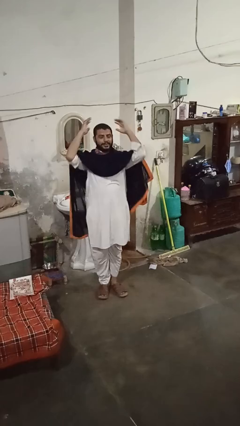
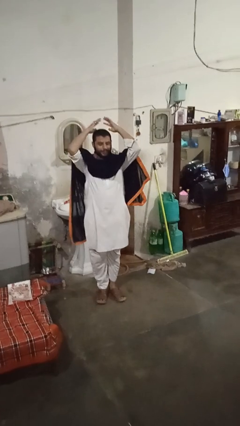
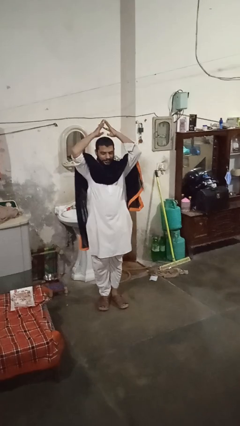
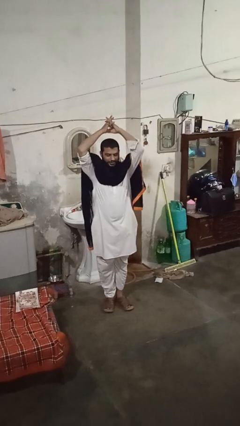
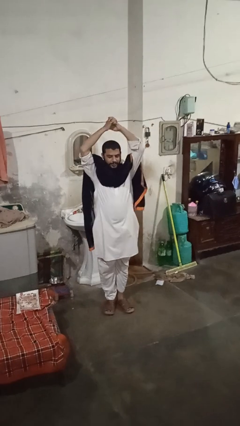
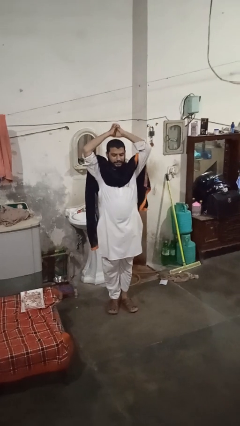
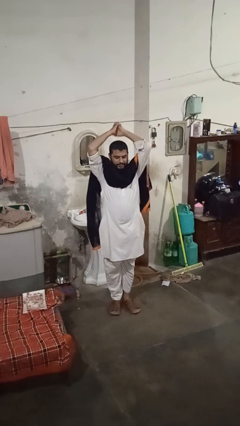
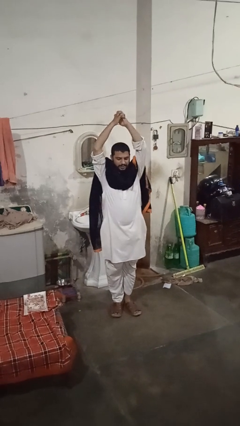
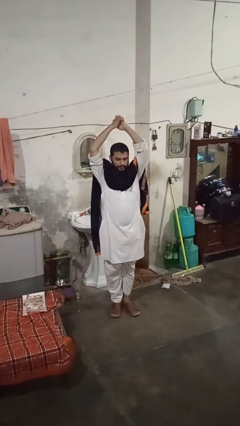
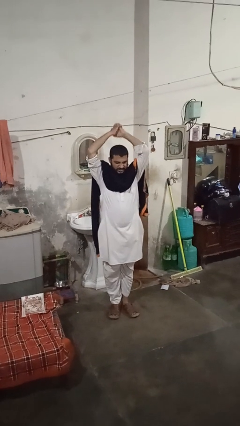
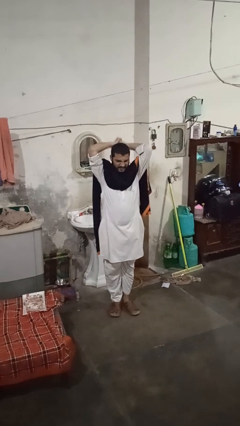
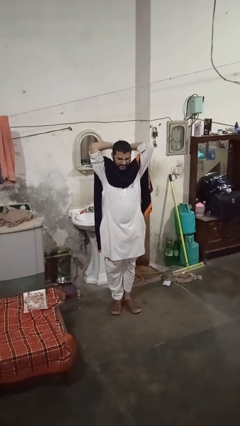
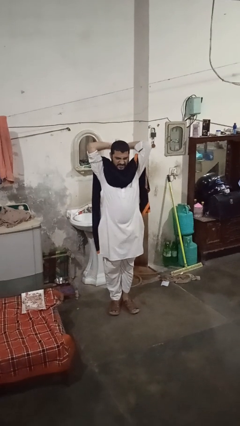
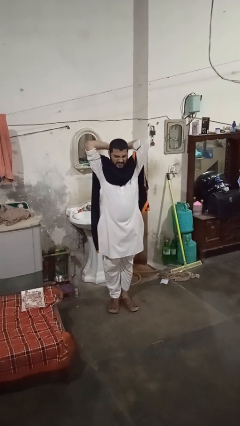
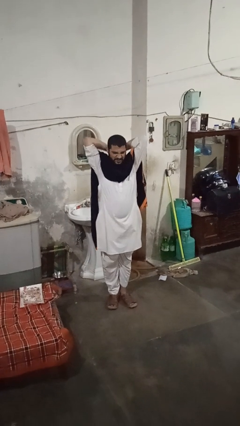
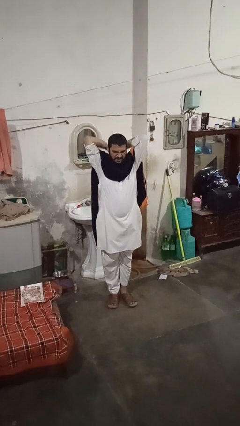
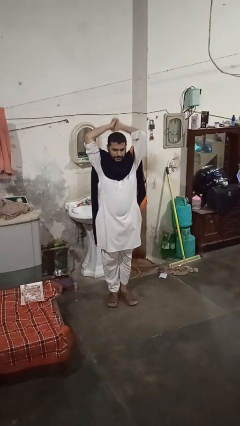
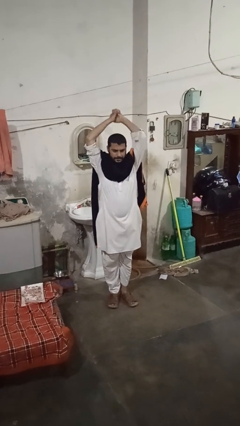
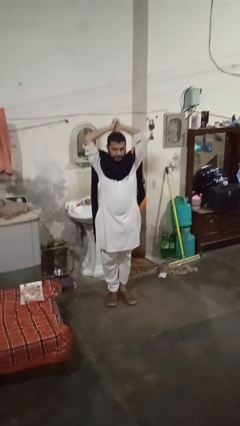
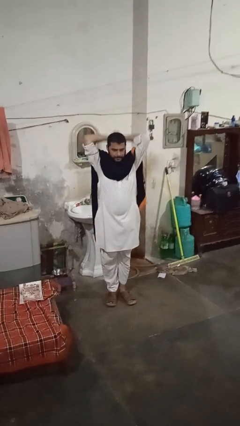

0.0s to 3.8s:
person stretches arms over head

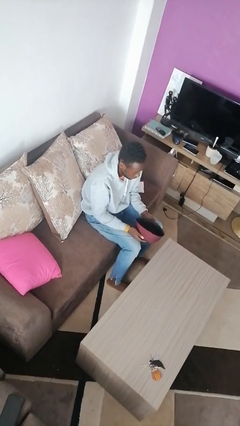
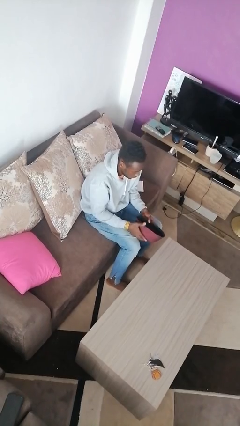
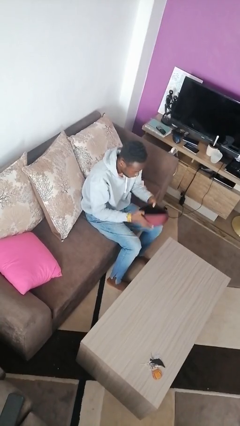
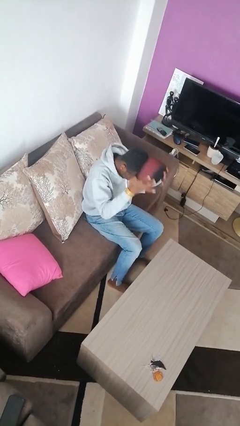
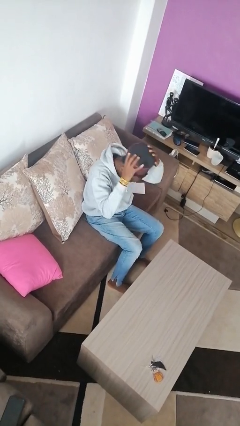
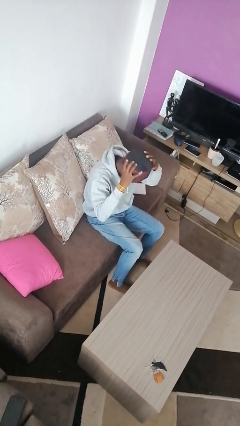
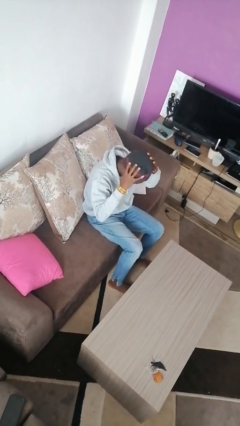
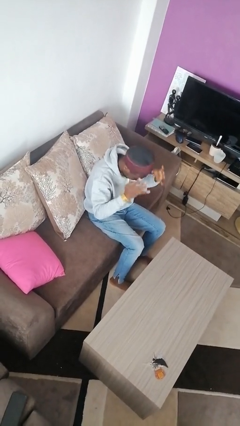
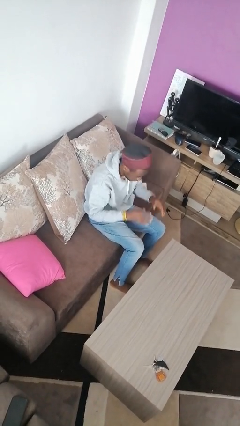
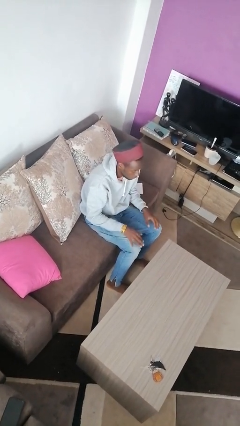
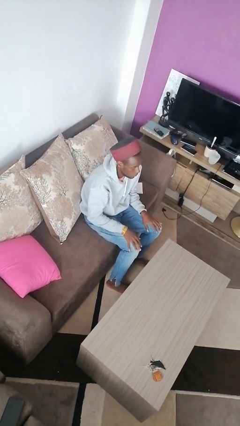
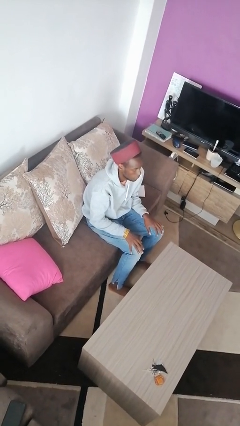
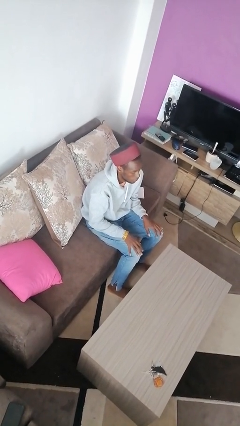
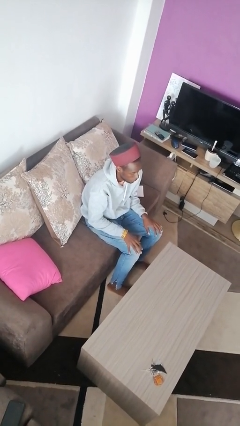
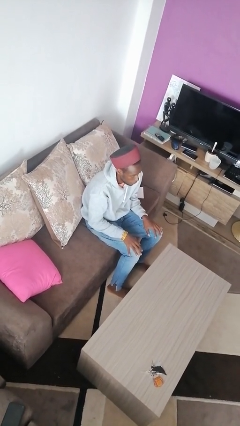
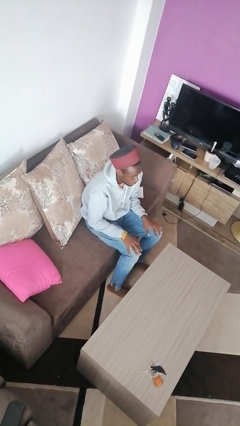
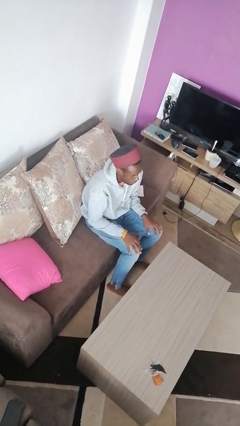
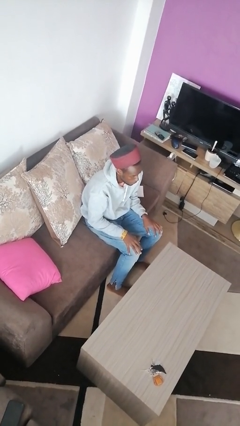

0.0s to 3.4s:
person puts on hat

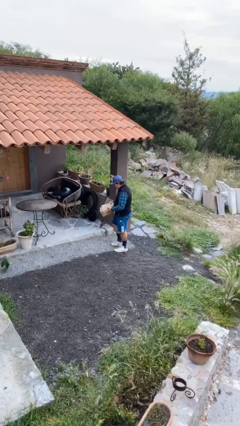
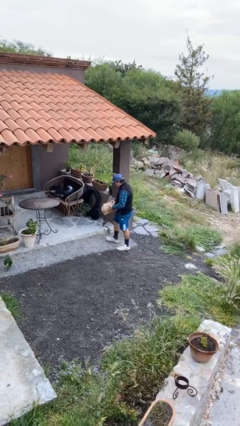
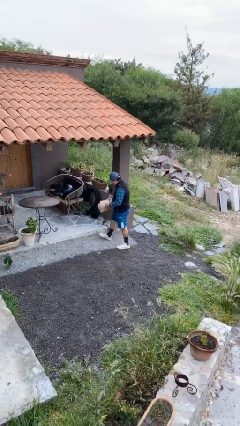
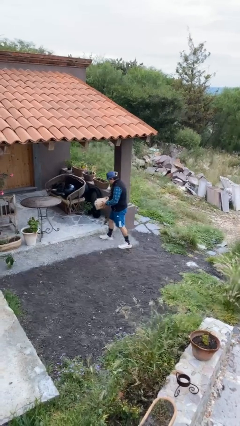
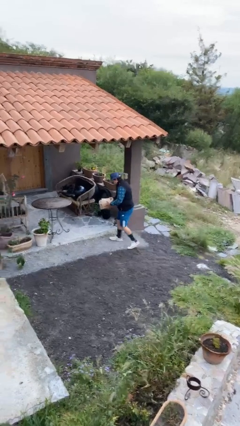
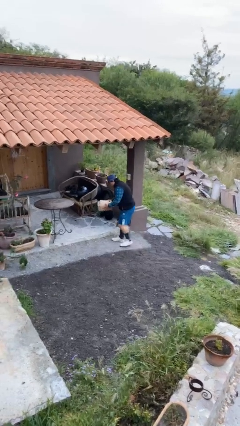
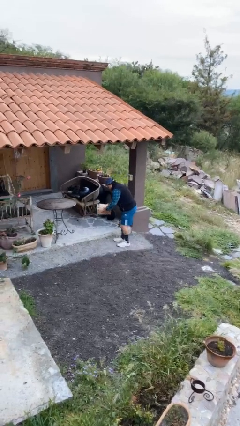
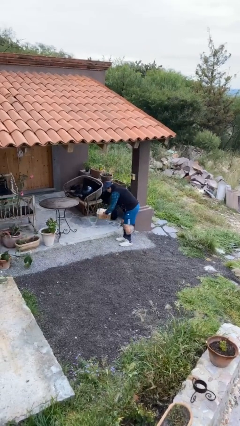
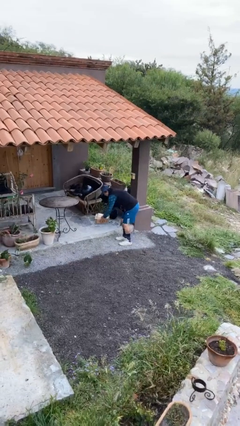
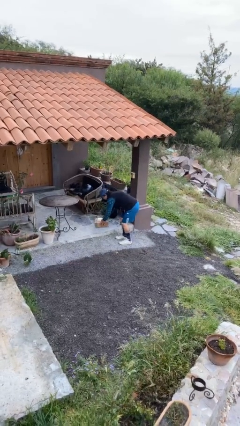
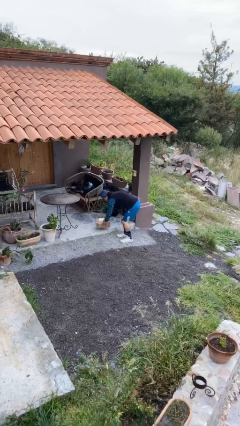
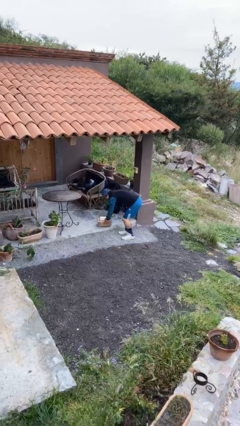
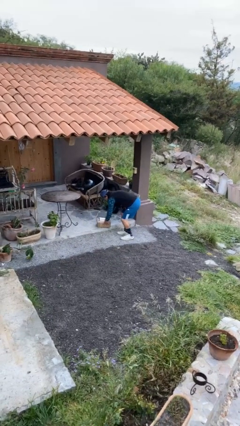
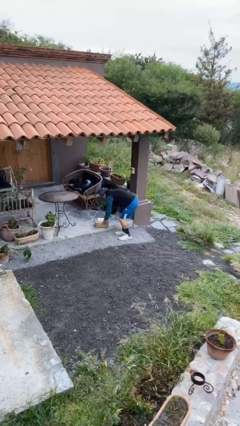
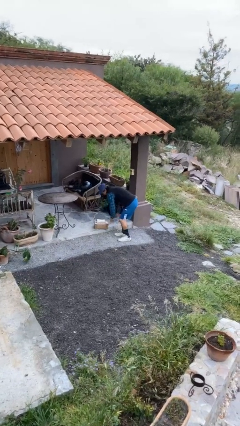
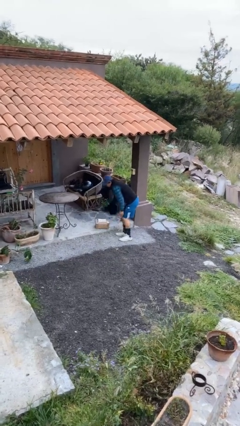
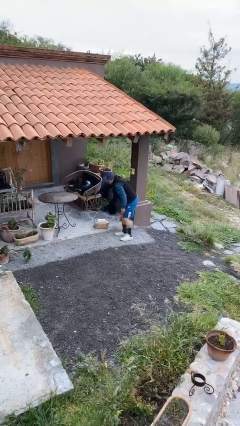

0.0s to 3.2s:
person puts down object on floor

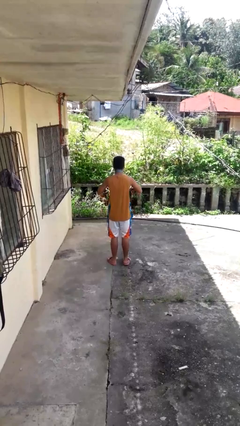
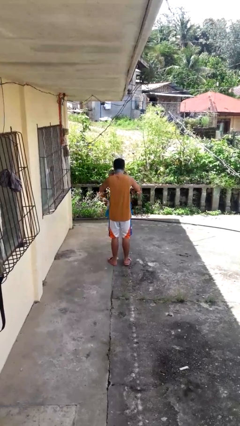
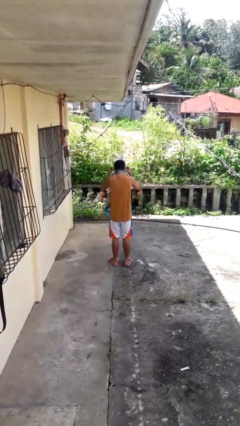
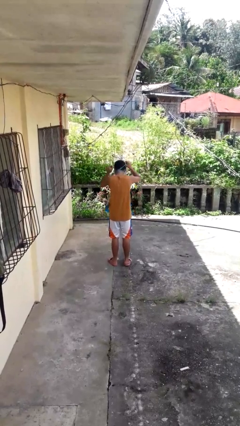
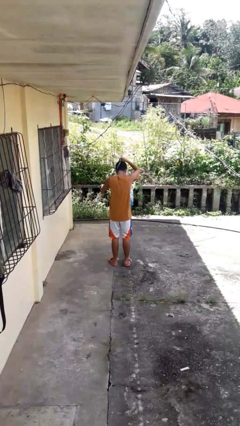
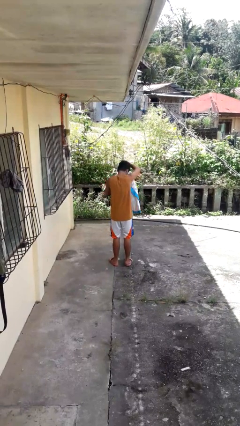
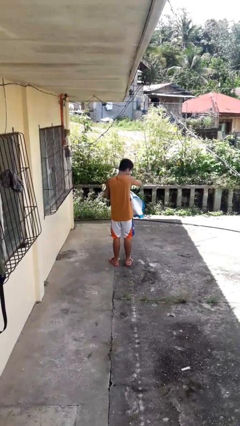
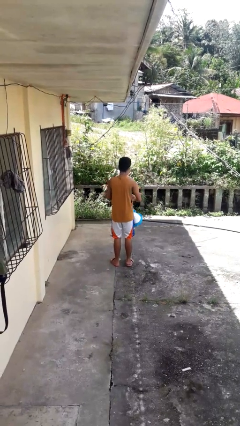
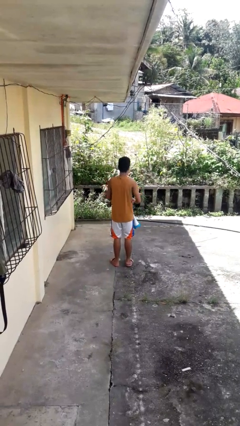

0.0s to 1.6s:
person takes off apron

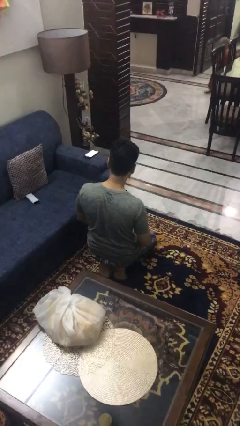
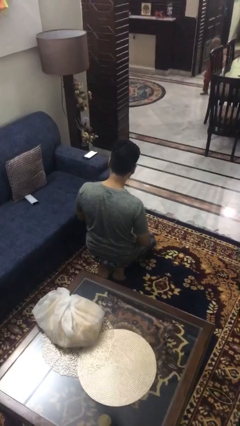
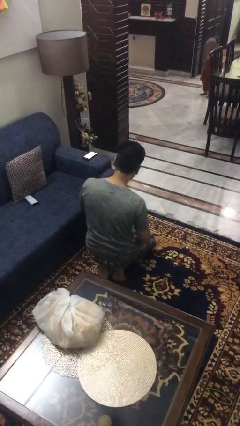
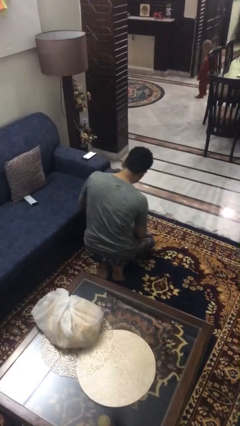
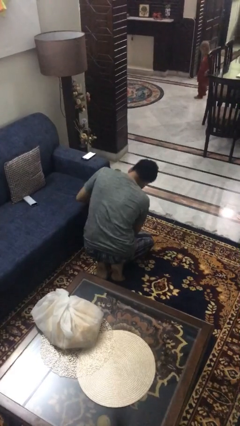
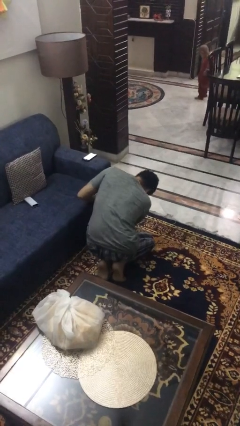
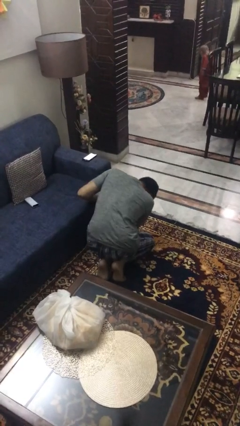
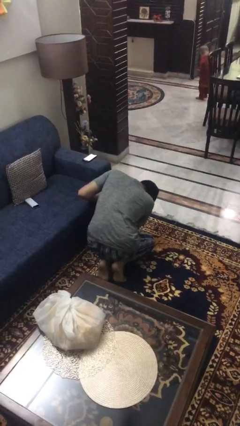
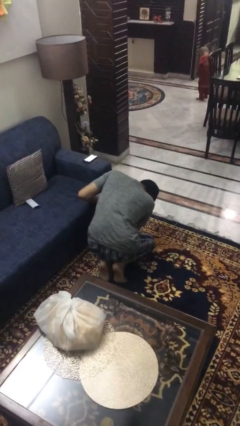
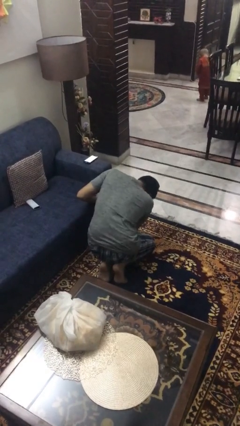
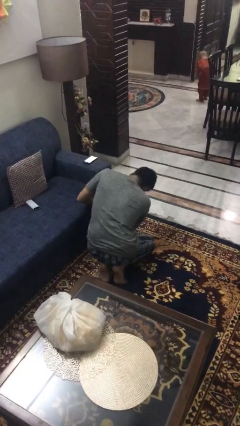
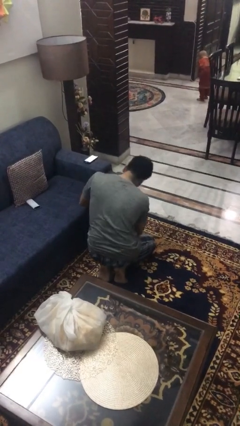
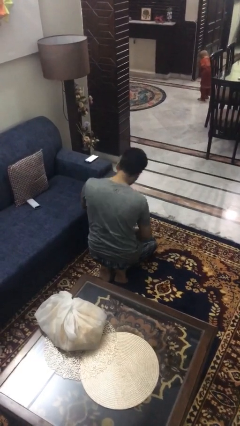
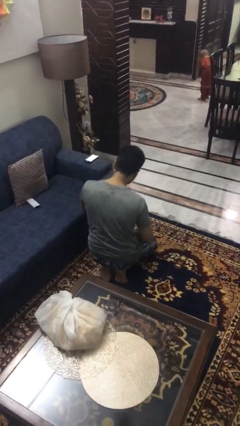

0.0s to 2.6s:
person searches under couch

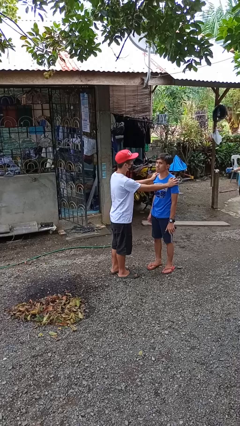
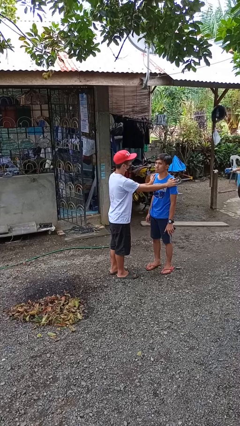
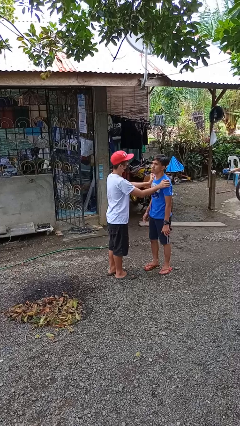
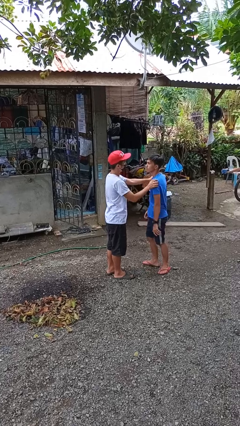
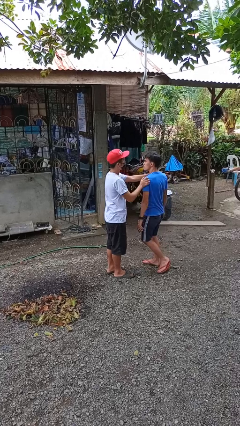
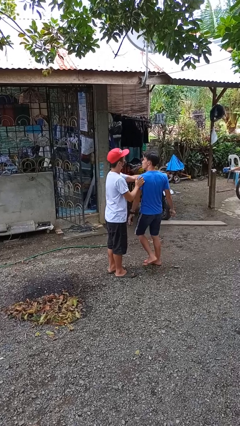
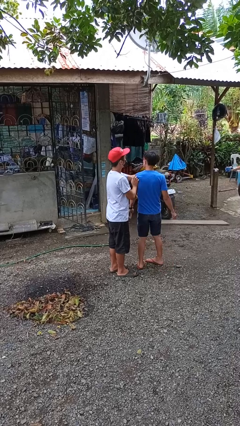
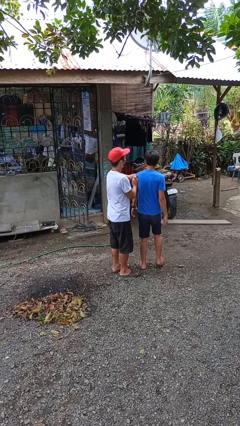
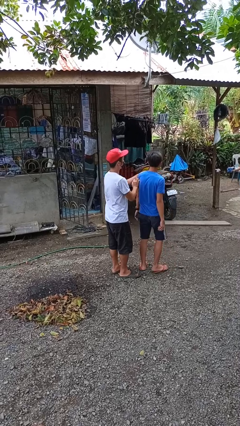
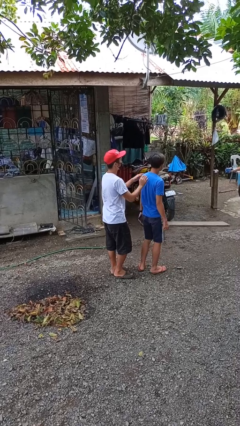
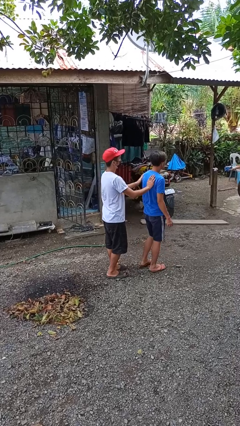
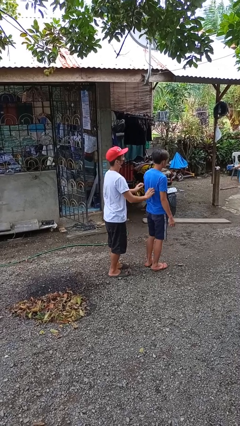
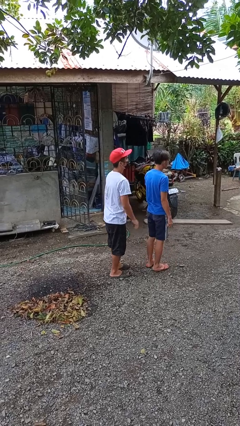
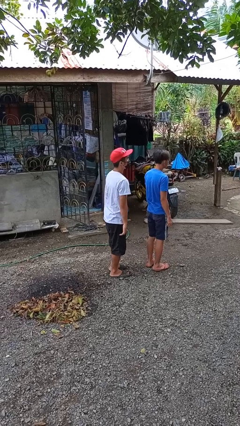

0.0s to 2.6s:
person spins person around
